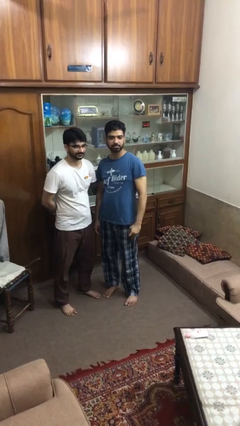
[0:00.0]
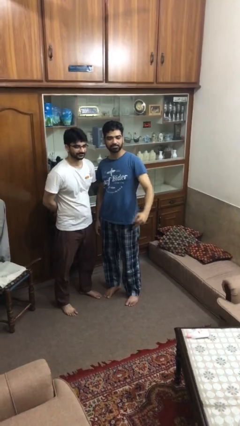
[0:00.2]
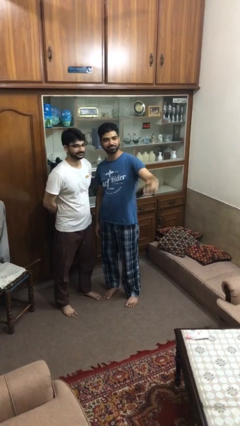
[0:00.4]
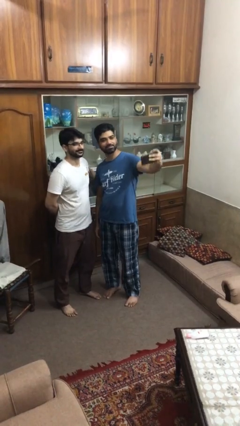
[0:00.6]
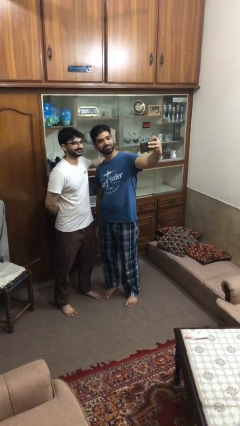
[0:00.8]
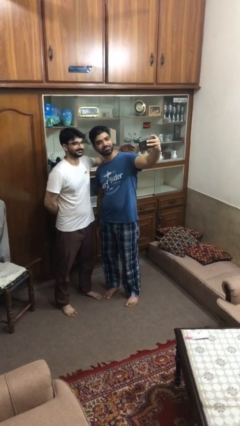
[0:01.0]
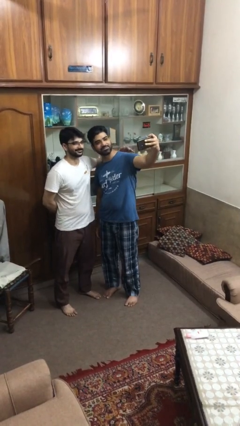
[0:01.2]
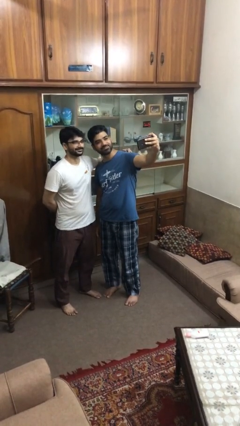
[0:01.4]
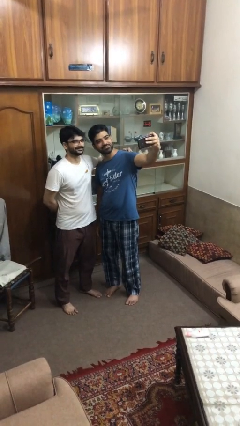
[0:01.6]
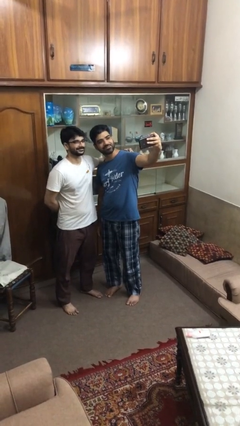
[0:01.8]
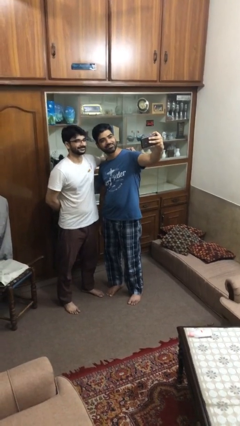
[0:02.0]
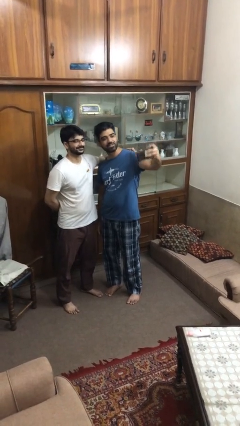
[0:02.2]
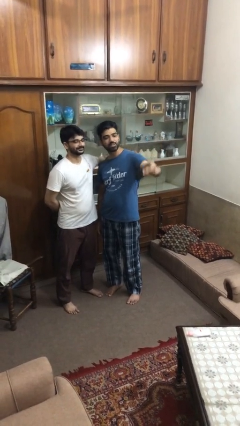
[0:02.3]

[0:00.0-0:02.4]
person takes selfie with person

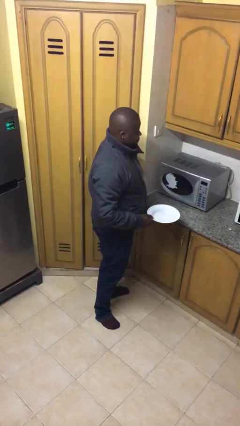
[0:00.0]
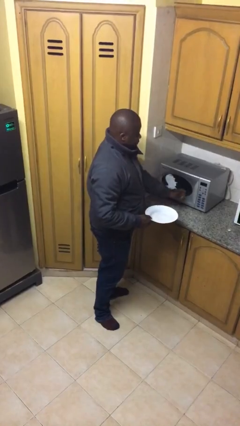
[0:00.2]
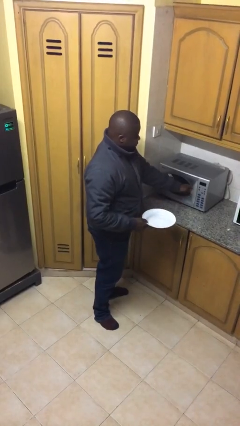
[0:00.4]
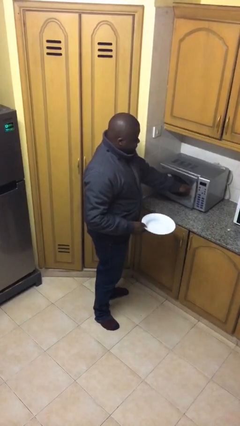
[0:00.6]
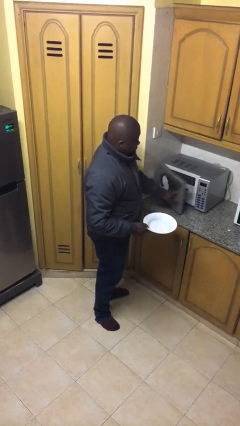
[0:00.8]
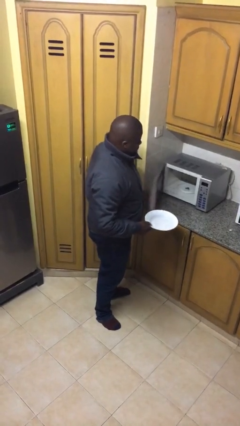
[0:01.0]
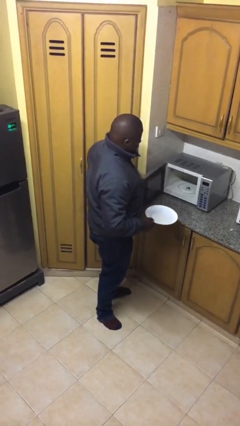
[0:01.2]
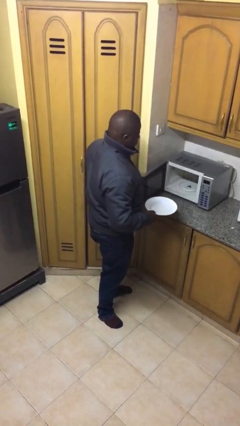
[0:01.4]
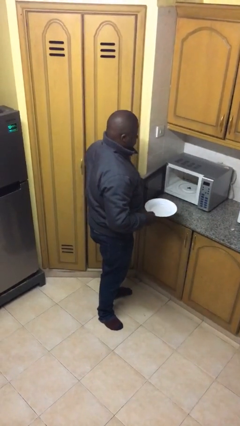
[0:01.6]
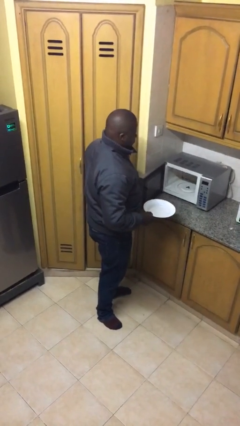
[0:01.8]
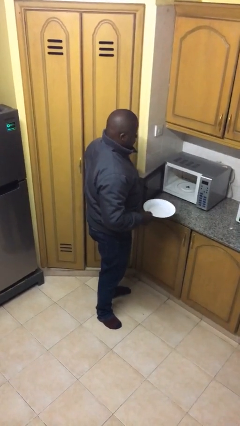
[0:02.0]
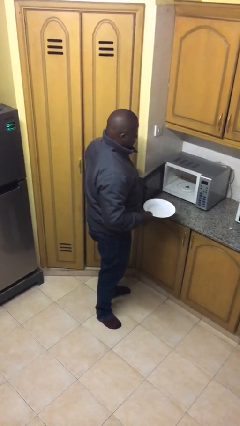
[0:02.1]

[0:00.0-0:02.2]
person opens microwave

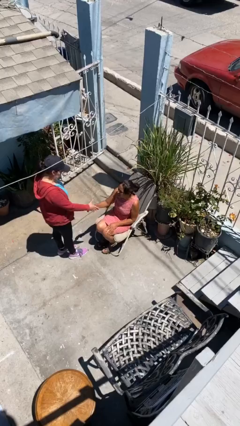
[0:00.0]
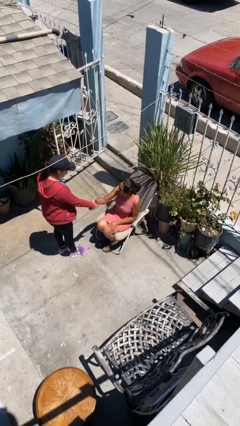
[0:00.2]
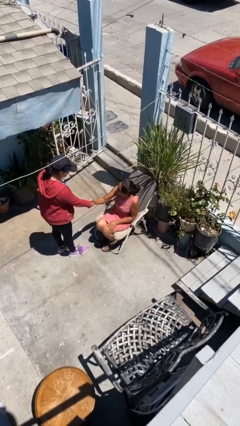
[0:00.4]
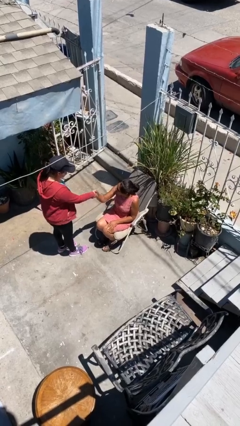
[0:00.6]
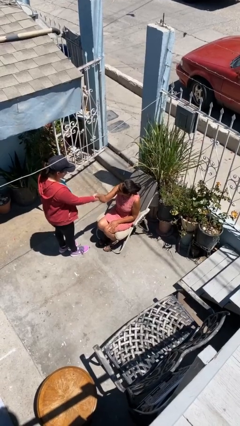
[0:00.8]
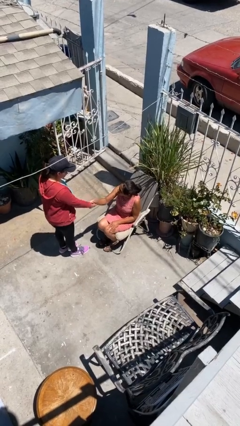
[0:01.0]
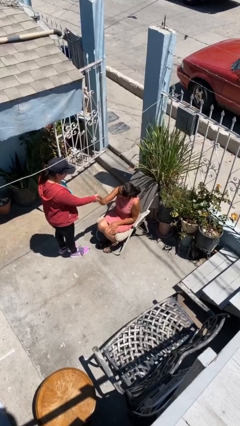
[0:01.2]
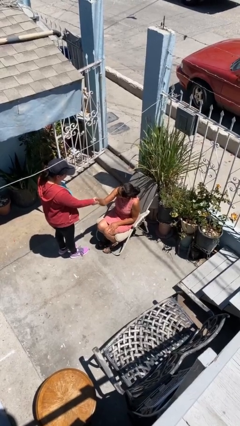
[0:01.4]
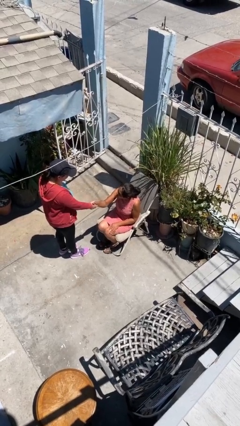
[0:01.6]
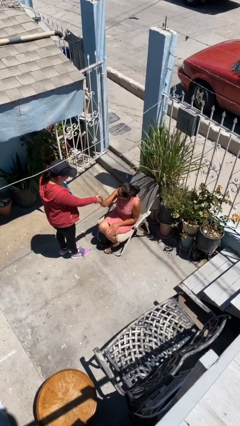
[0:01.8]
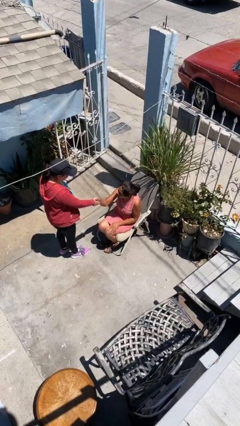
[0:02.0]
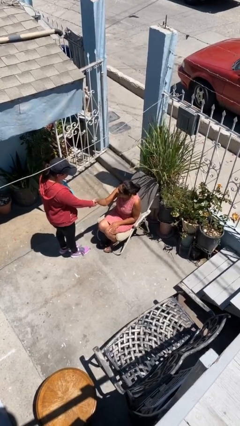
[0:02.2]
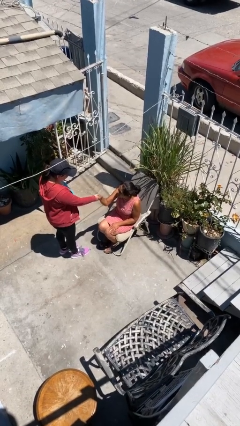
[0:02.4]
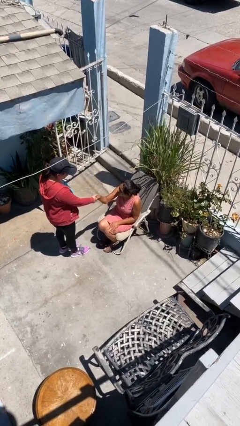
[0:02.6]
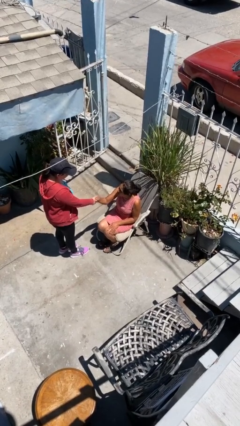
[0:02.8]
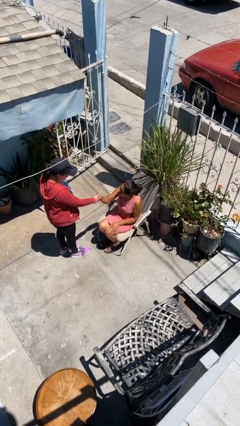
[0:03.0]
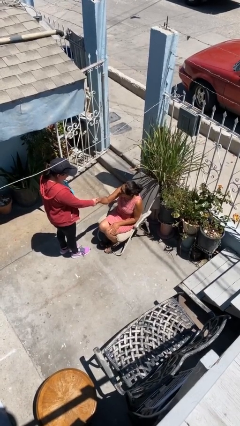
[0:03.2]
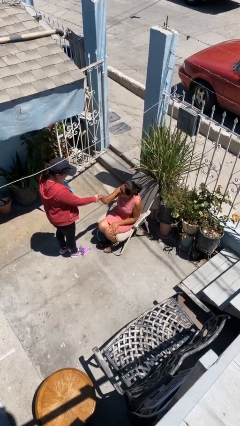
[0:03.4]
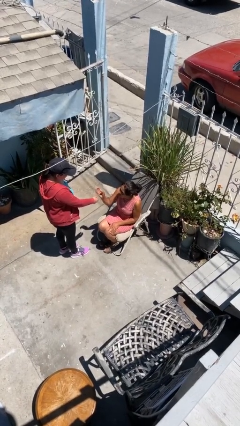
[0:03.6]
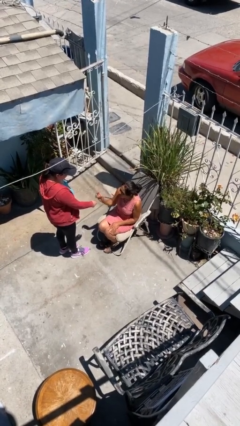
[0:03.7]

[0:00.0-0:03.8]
person shakes hand

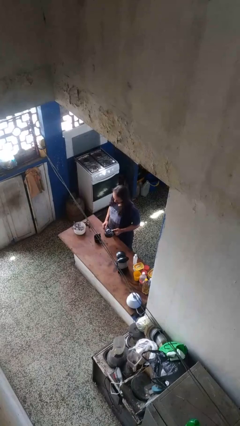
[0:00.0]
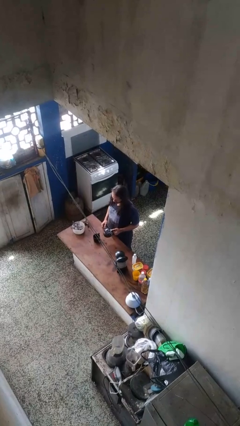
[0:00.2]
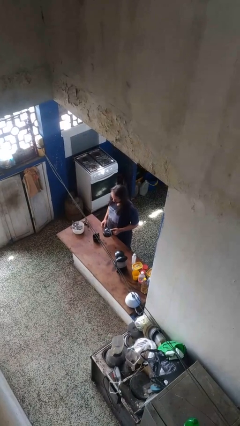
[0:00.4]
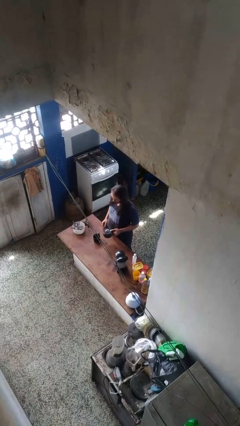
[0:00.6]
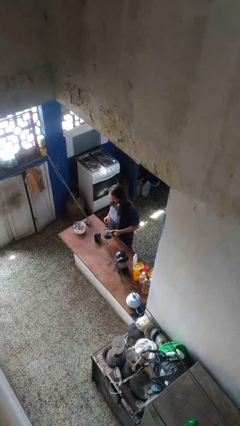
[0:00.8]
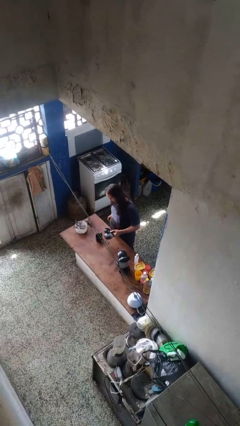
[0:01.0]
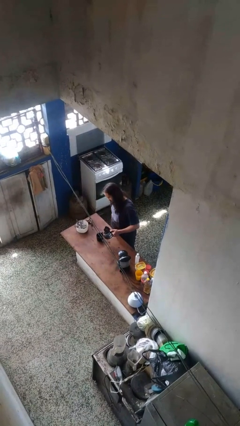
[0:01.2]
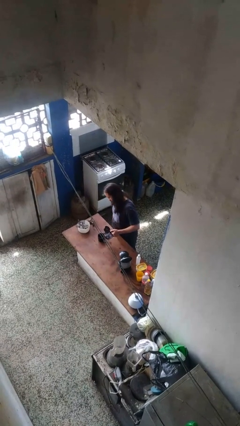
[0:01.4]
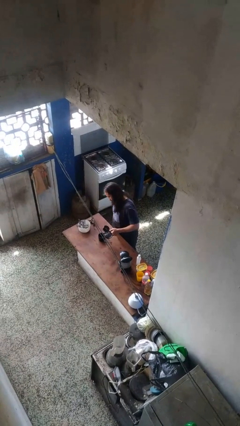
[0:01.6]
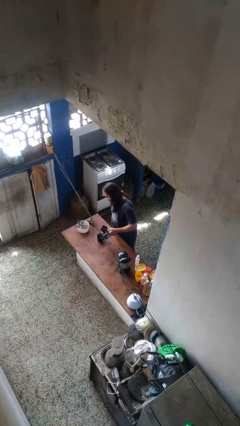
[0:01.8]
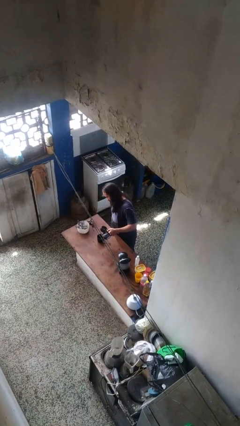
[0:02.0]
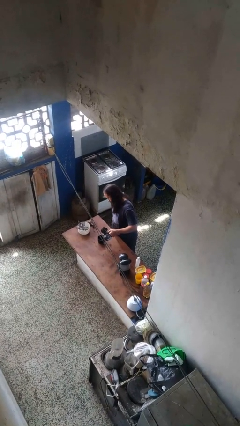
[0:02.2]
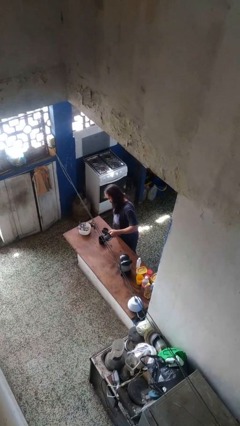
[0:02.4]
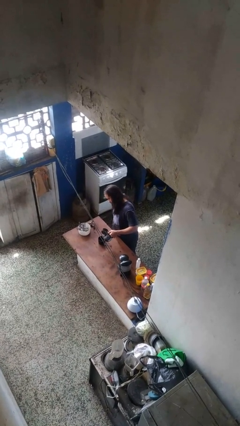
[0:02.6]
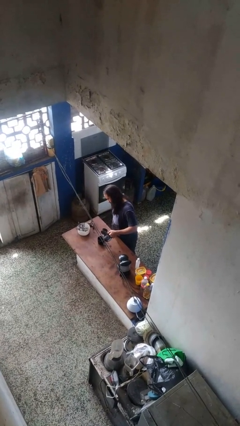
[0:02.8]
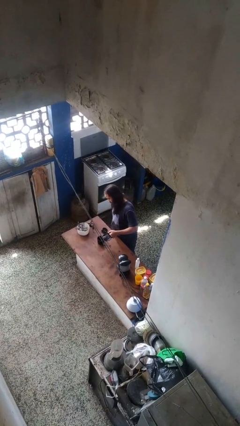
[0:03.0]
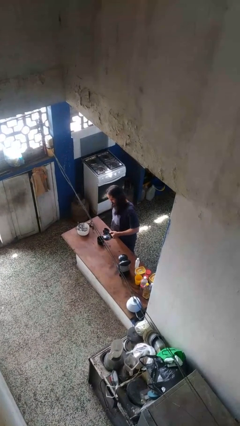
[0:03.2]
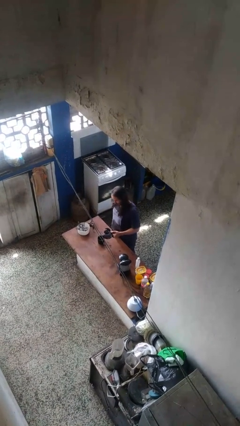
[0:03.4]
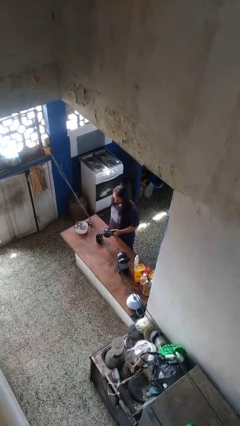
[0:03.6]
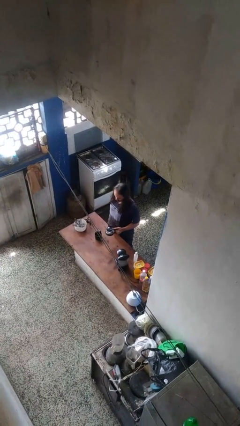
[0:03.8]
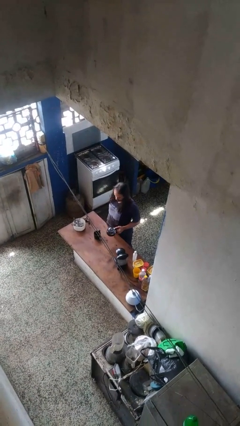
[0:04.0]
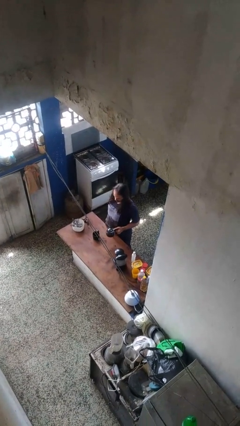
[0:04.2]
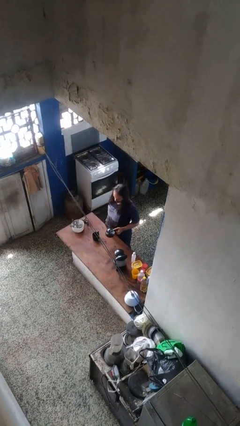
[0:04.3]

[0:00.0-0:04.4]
person pours coffee into mug

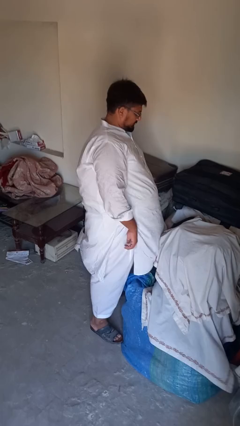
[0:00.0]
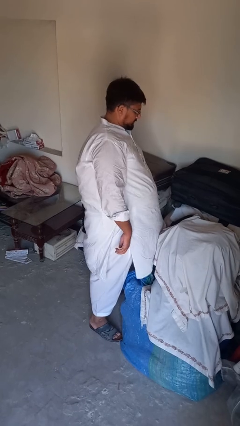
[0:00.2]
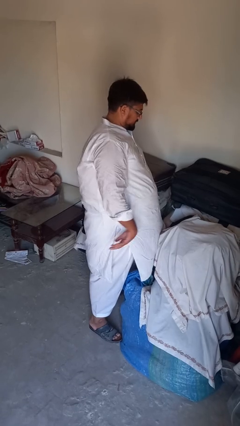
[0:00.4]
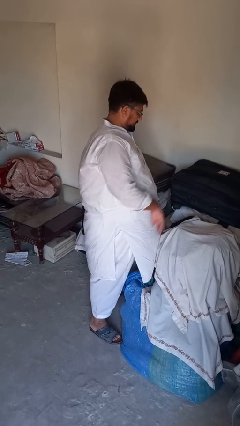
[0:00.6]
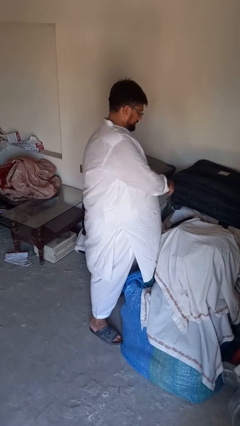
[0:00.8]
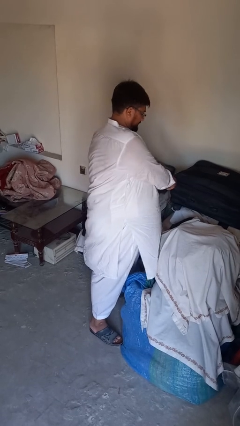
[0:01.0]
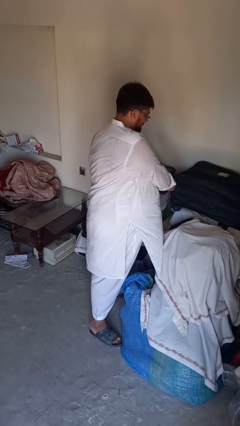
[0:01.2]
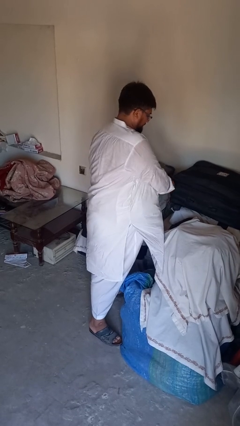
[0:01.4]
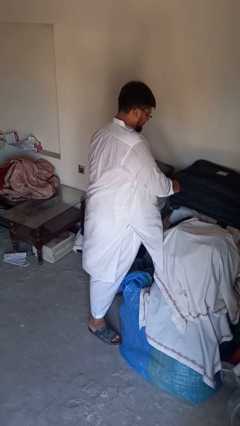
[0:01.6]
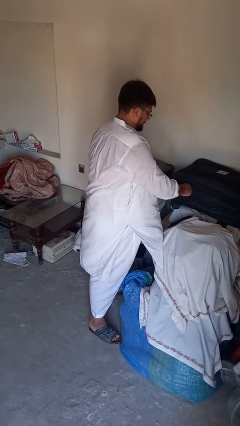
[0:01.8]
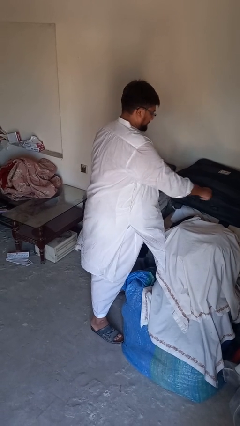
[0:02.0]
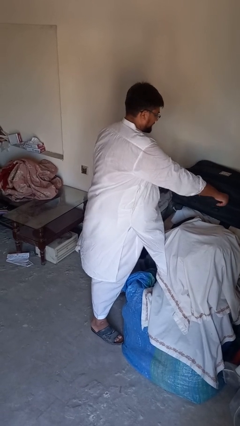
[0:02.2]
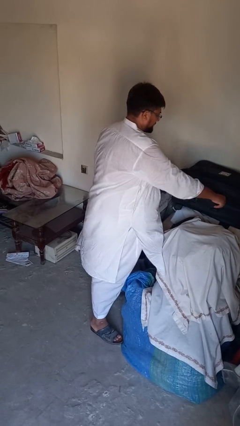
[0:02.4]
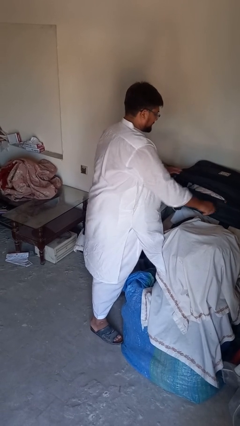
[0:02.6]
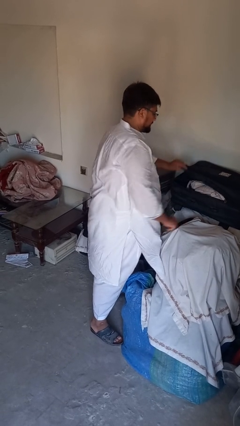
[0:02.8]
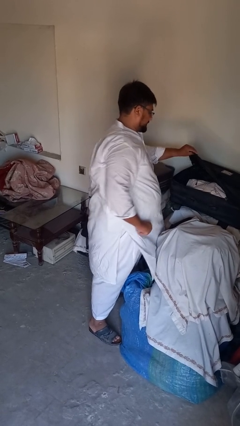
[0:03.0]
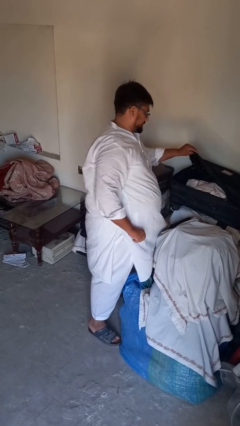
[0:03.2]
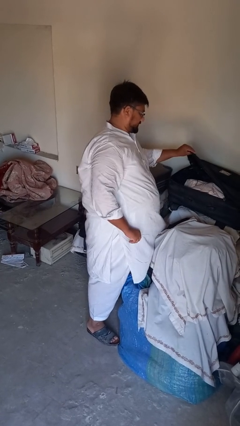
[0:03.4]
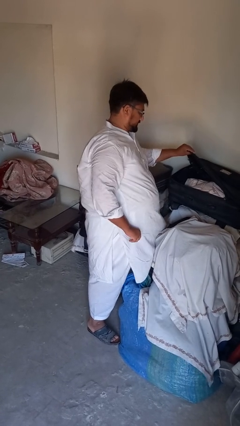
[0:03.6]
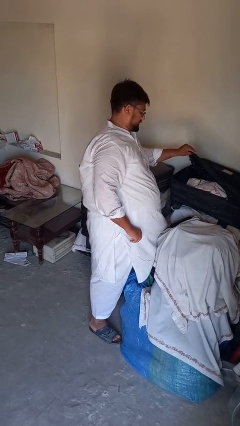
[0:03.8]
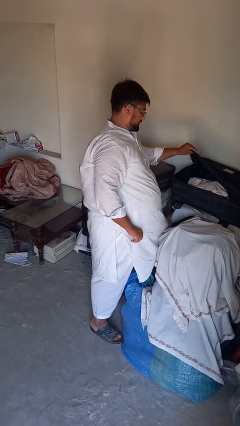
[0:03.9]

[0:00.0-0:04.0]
person opens suitcase

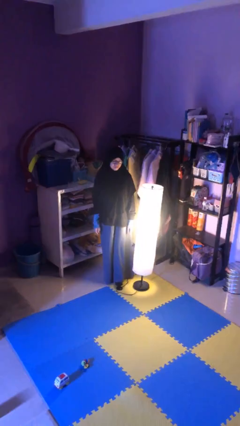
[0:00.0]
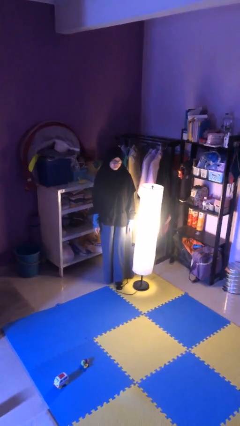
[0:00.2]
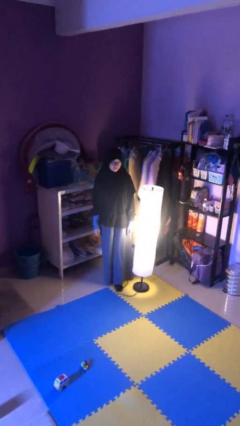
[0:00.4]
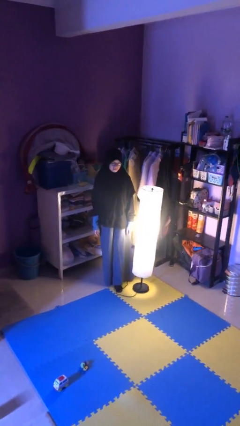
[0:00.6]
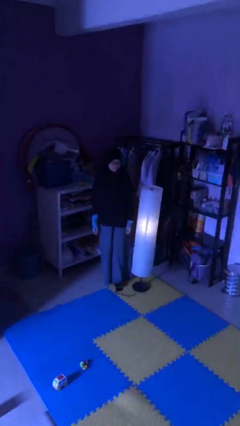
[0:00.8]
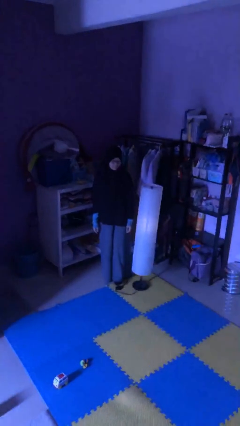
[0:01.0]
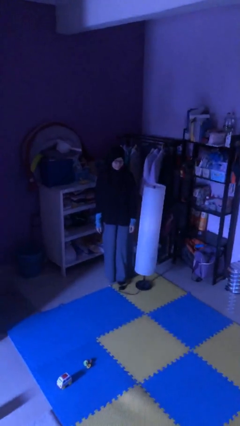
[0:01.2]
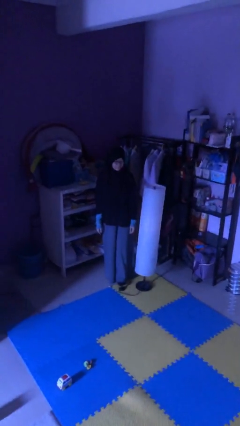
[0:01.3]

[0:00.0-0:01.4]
person turns off lamp
